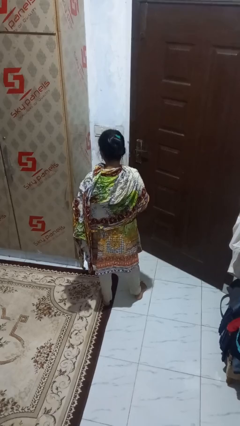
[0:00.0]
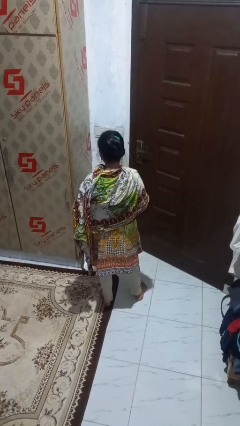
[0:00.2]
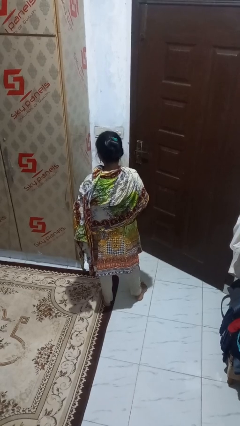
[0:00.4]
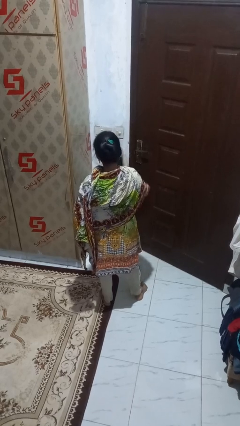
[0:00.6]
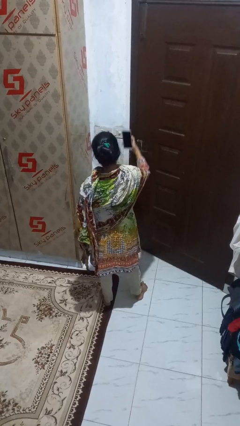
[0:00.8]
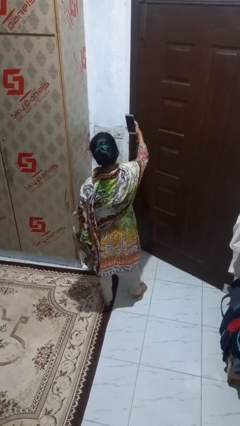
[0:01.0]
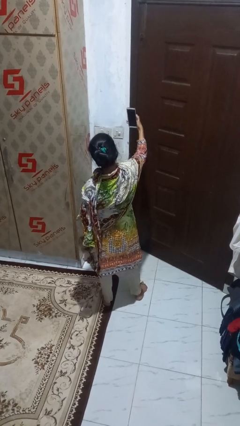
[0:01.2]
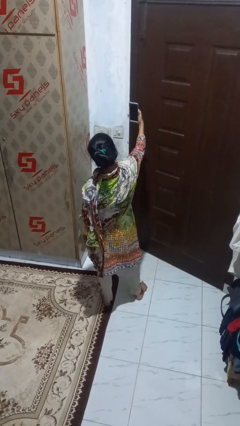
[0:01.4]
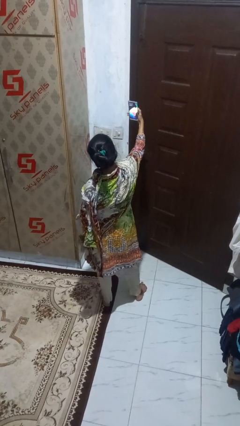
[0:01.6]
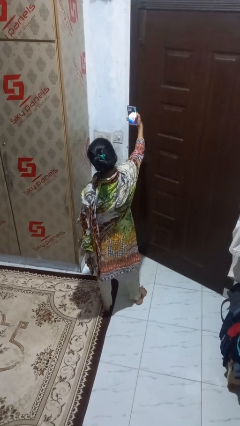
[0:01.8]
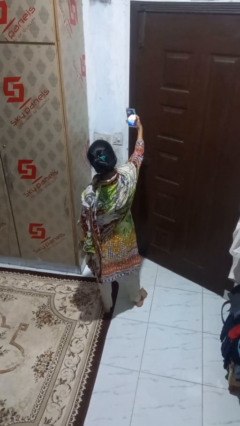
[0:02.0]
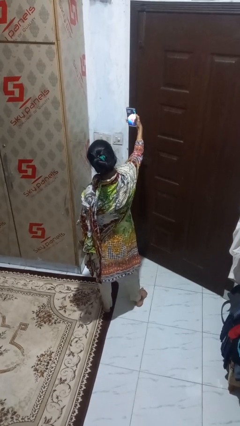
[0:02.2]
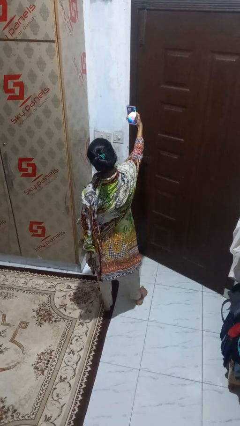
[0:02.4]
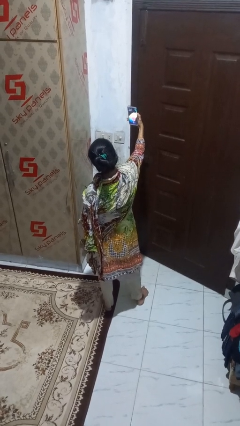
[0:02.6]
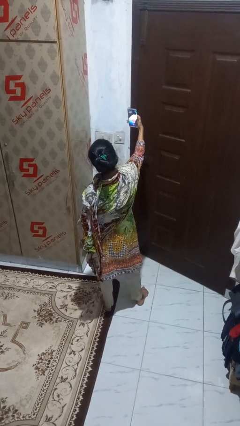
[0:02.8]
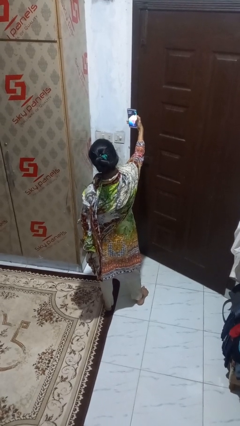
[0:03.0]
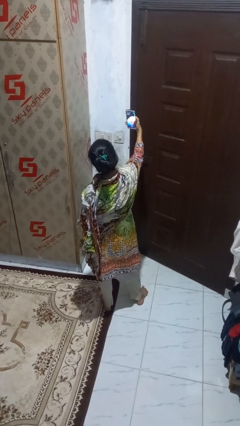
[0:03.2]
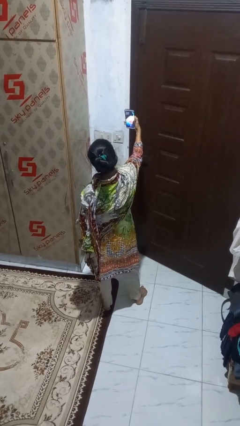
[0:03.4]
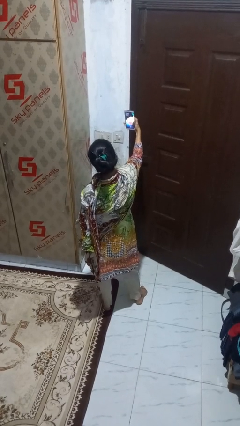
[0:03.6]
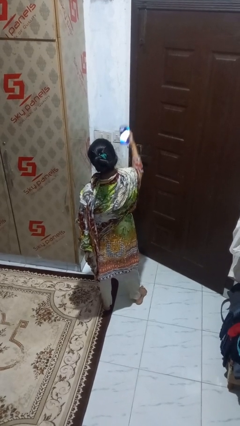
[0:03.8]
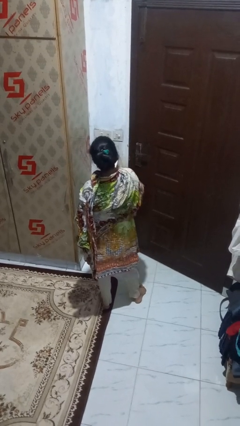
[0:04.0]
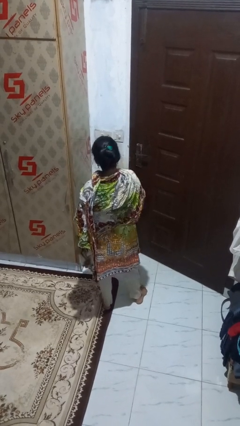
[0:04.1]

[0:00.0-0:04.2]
person takes selfie

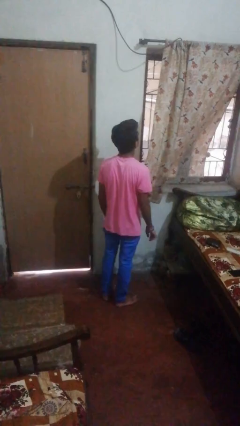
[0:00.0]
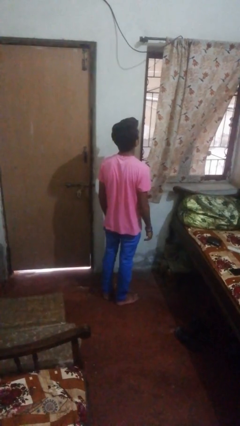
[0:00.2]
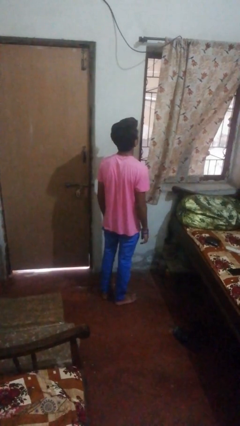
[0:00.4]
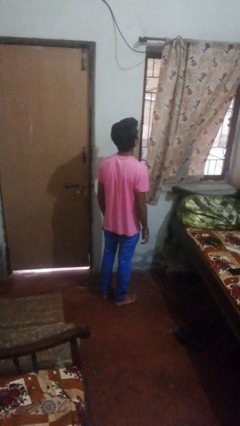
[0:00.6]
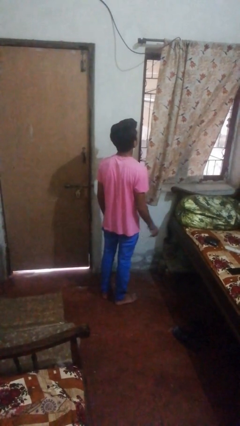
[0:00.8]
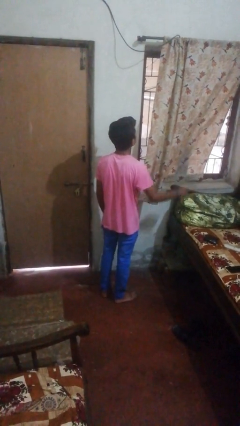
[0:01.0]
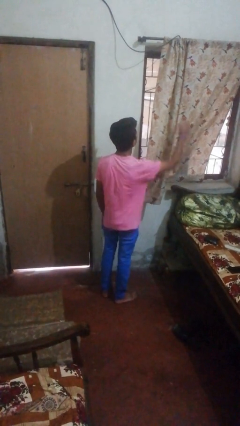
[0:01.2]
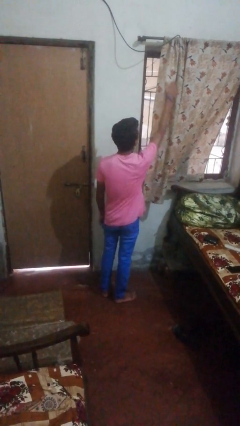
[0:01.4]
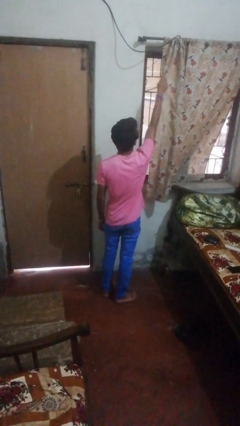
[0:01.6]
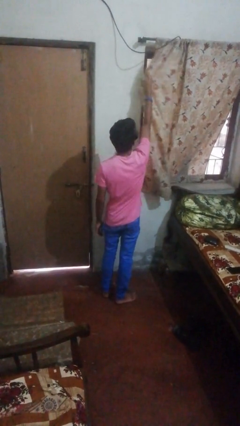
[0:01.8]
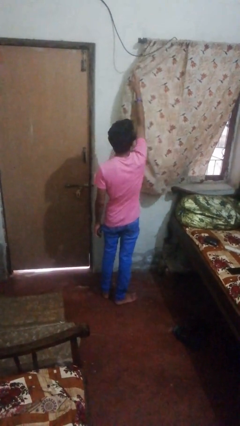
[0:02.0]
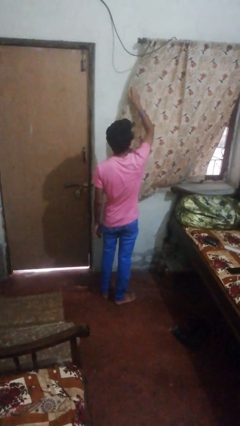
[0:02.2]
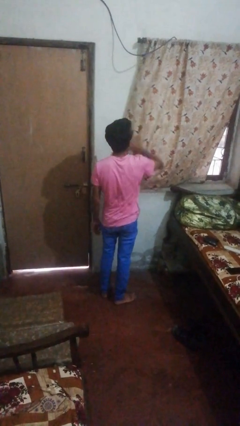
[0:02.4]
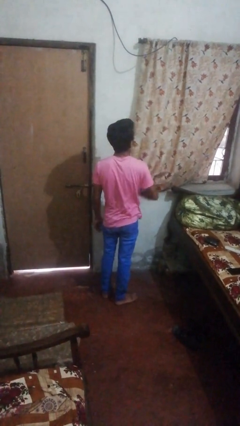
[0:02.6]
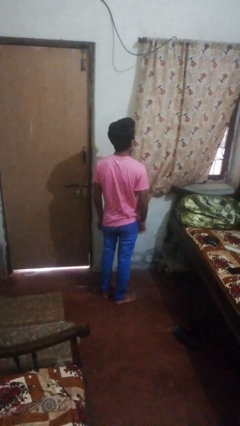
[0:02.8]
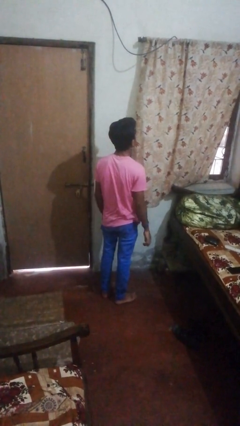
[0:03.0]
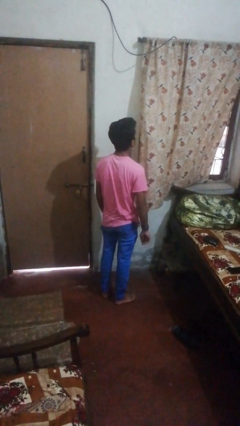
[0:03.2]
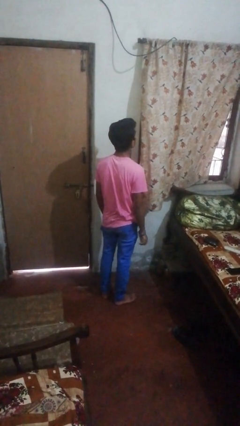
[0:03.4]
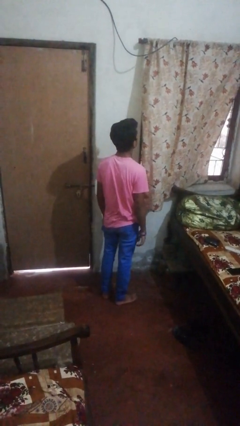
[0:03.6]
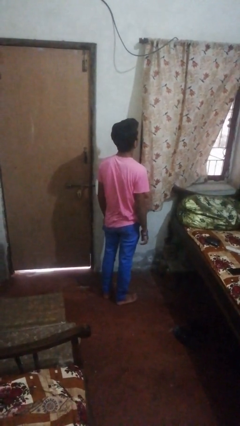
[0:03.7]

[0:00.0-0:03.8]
person closes curtains

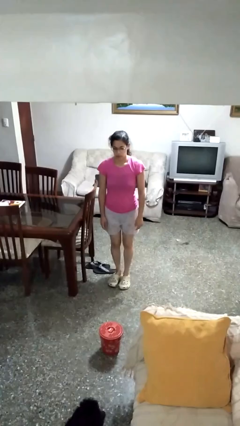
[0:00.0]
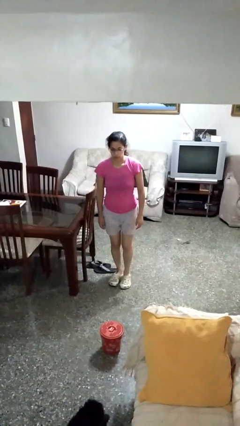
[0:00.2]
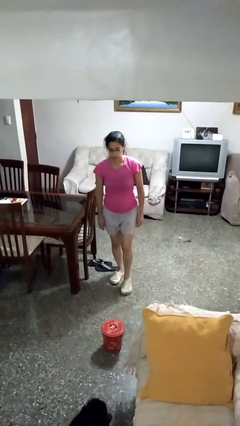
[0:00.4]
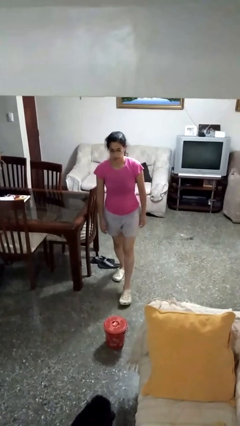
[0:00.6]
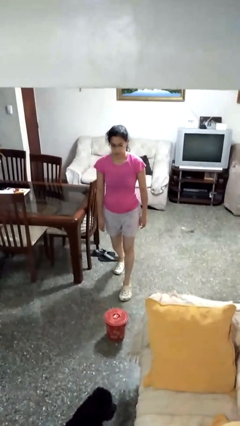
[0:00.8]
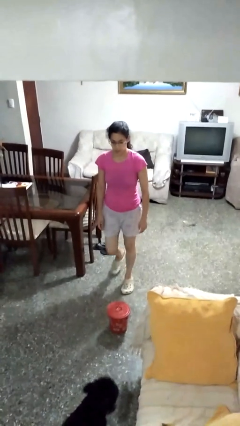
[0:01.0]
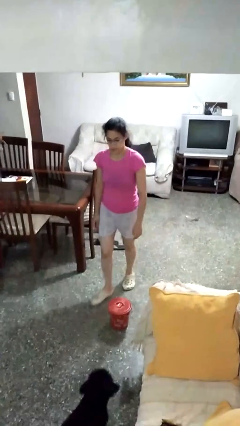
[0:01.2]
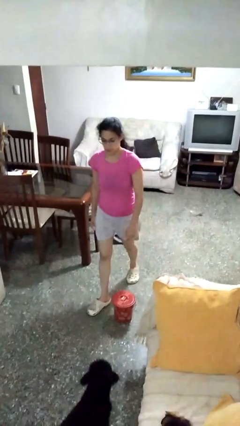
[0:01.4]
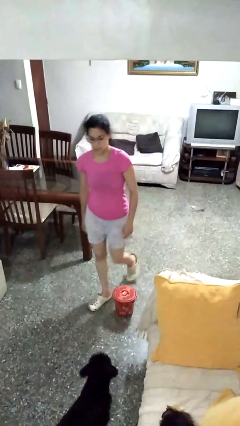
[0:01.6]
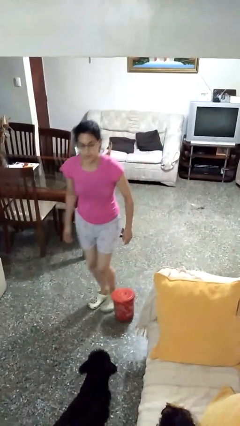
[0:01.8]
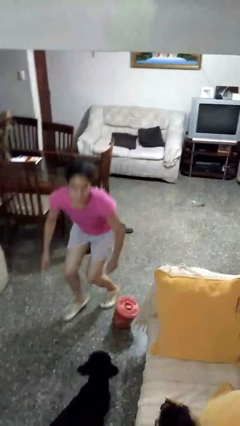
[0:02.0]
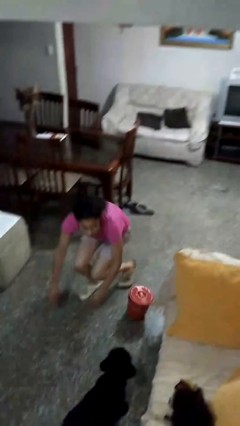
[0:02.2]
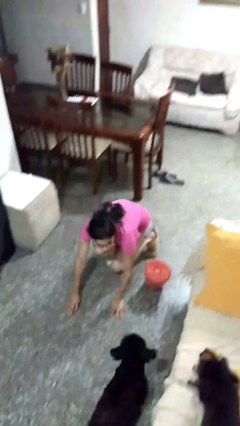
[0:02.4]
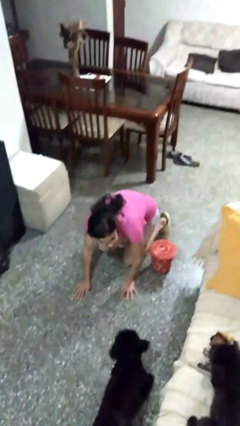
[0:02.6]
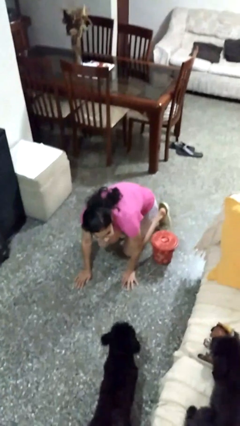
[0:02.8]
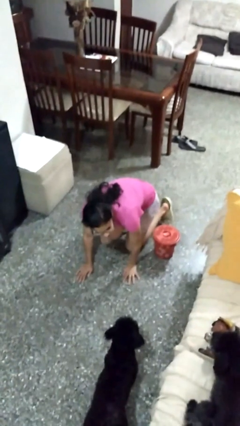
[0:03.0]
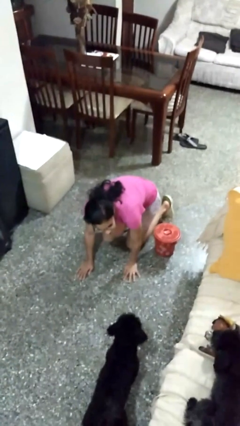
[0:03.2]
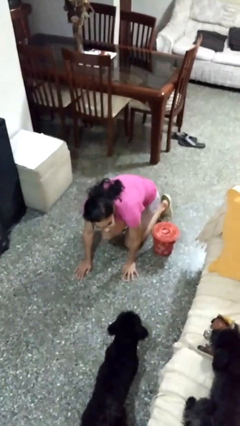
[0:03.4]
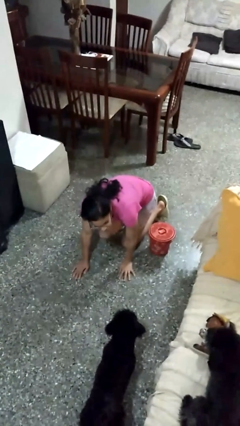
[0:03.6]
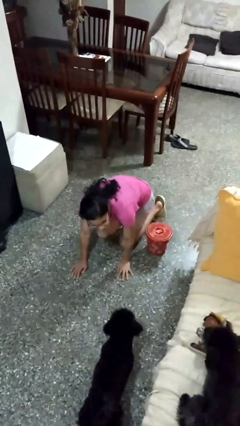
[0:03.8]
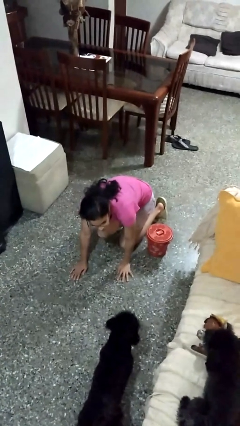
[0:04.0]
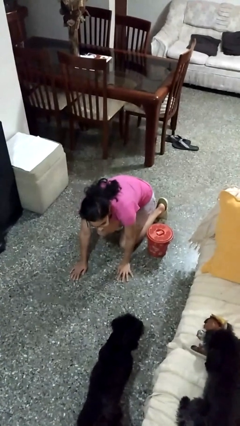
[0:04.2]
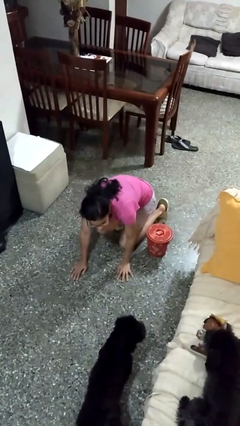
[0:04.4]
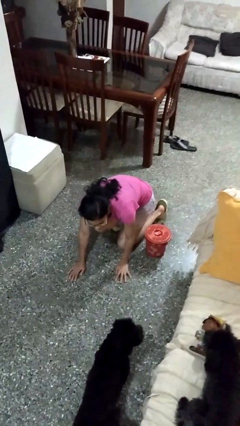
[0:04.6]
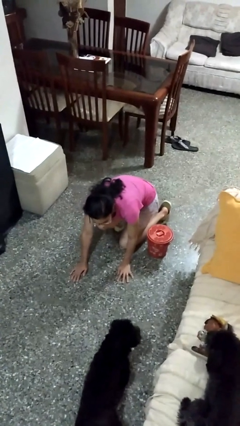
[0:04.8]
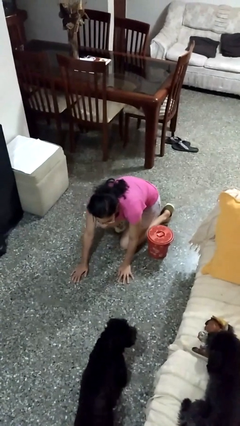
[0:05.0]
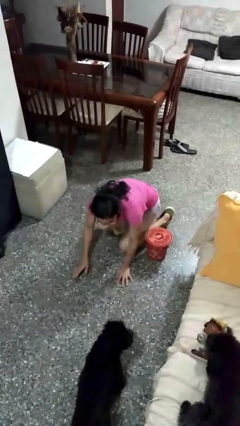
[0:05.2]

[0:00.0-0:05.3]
person trips on object on floor

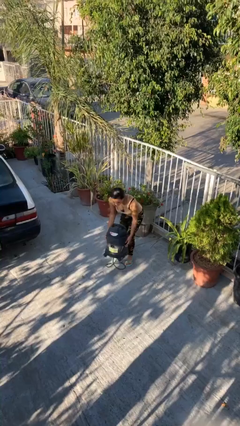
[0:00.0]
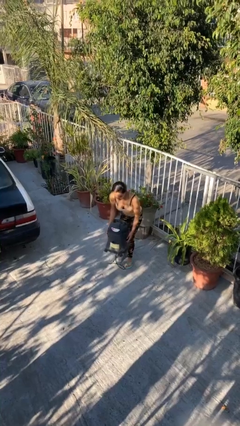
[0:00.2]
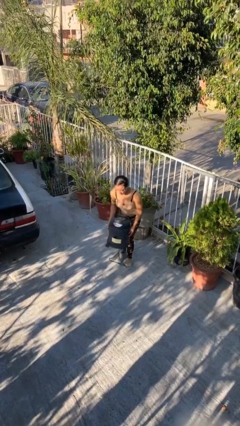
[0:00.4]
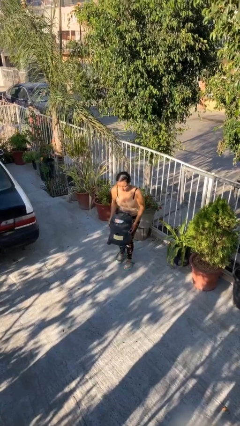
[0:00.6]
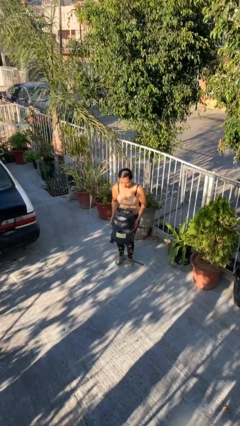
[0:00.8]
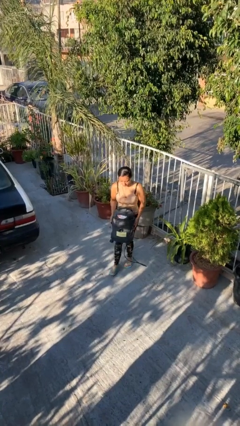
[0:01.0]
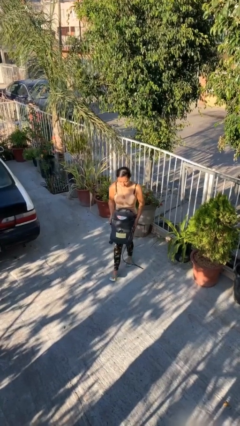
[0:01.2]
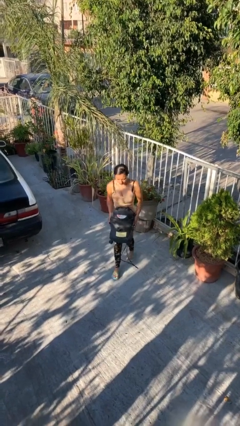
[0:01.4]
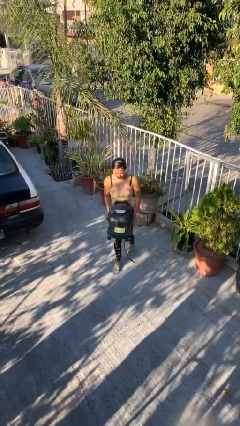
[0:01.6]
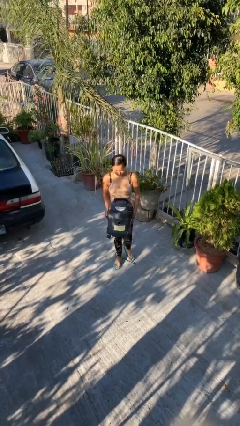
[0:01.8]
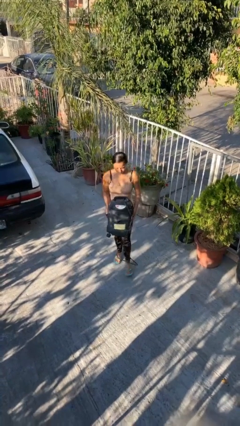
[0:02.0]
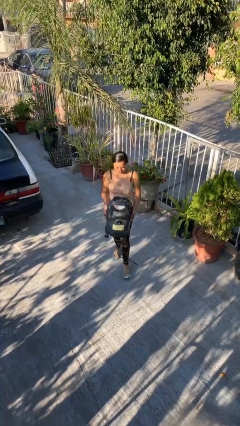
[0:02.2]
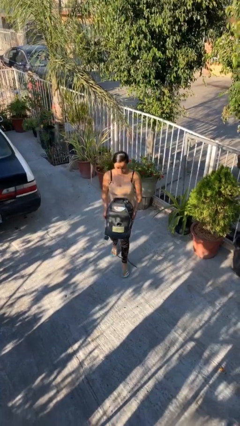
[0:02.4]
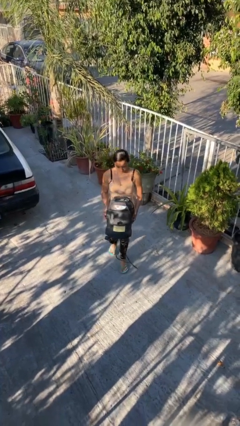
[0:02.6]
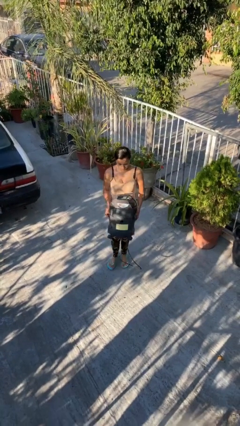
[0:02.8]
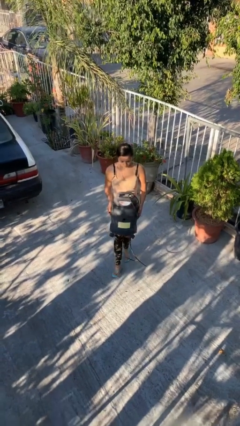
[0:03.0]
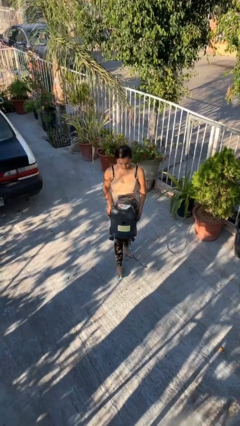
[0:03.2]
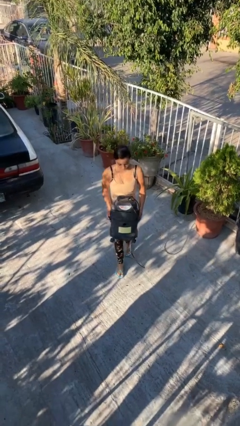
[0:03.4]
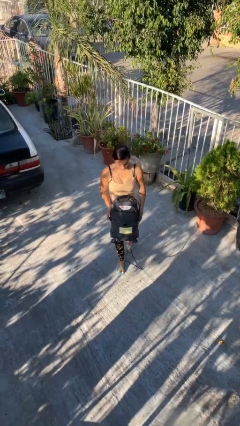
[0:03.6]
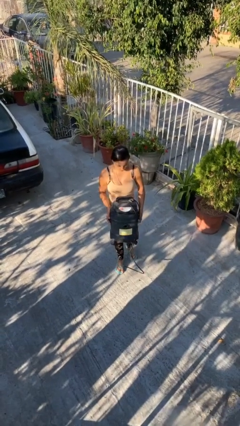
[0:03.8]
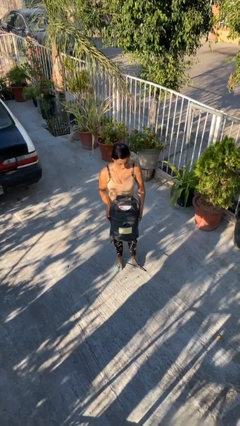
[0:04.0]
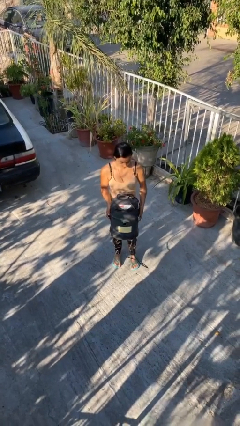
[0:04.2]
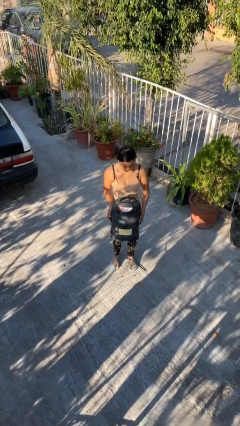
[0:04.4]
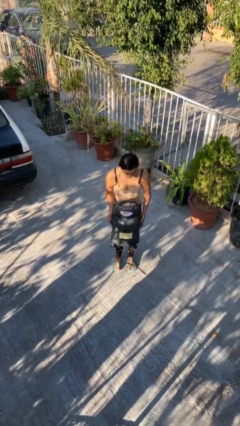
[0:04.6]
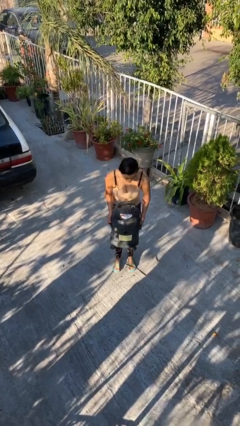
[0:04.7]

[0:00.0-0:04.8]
person carries heavy object
